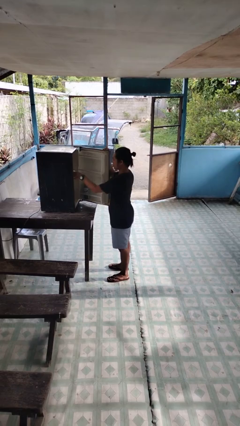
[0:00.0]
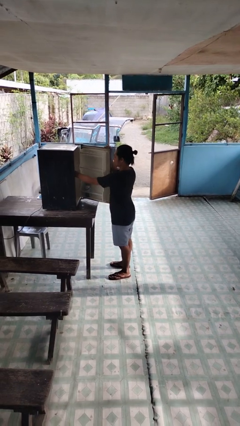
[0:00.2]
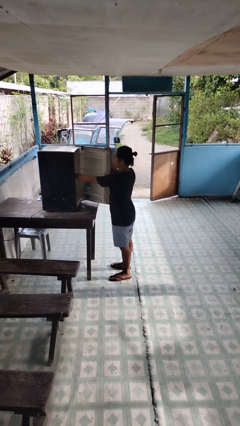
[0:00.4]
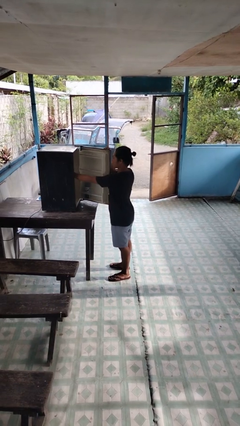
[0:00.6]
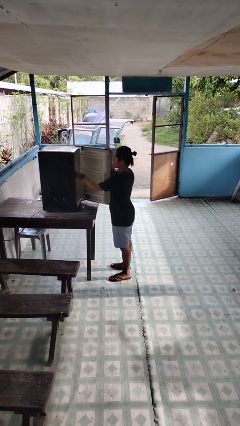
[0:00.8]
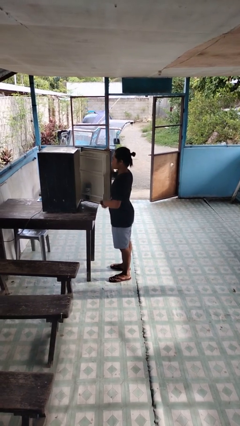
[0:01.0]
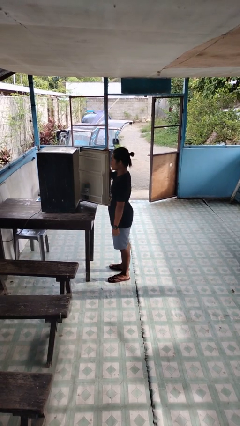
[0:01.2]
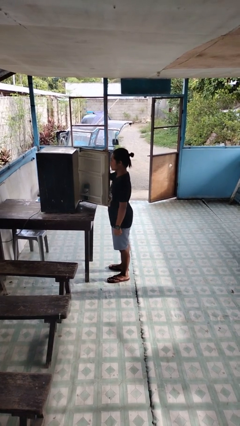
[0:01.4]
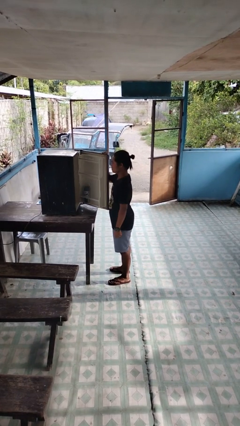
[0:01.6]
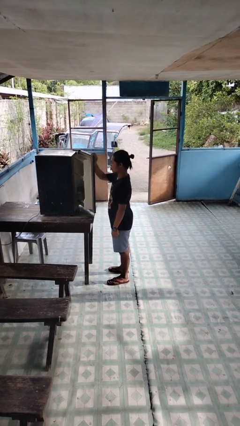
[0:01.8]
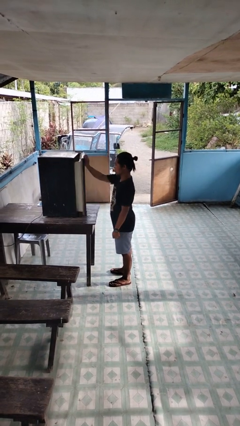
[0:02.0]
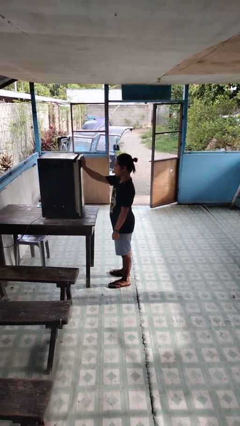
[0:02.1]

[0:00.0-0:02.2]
person puts object into refrigerator

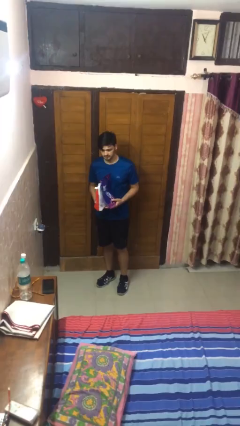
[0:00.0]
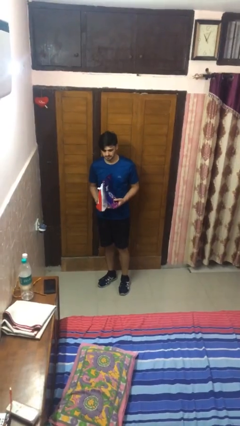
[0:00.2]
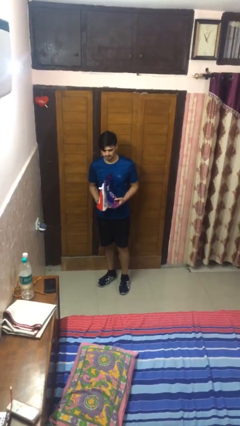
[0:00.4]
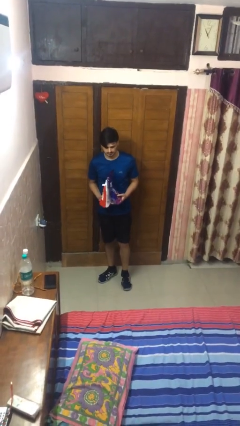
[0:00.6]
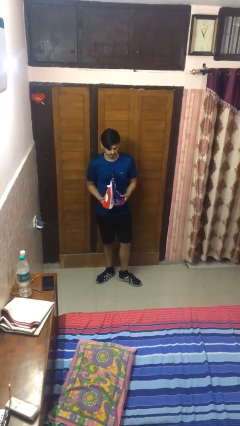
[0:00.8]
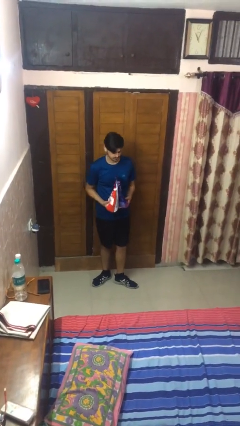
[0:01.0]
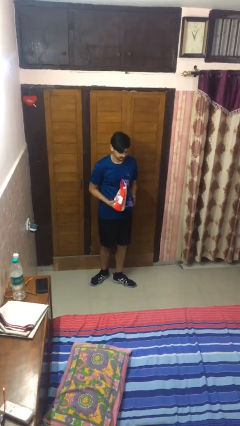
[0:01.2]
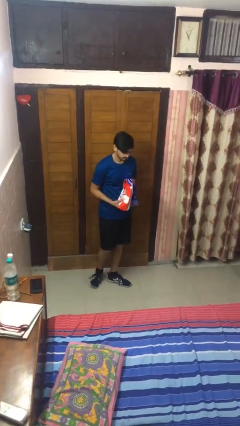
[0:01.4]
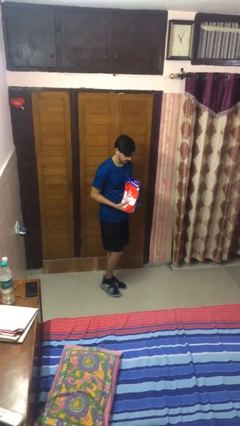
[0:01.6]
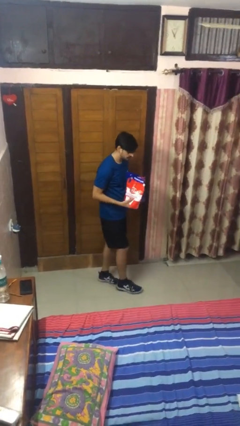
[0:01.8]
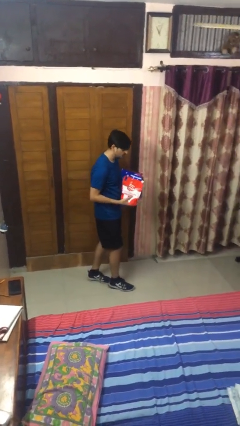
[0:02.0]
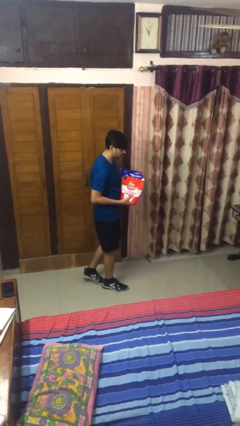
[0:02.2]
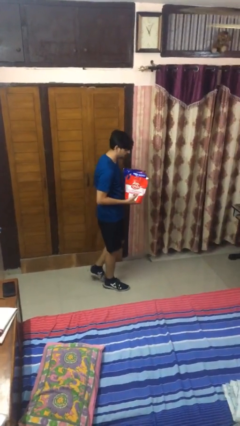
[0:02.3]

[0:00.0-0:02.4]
person carries groceries

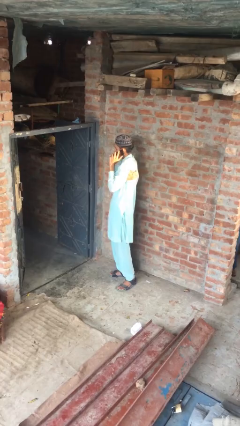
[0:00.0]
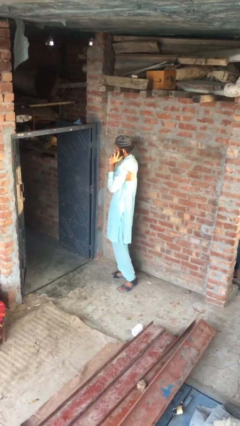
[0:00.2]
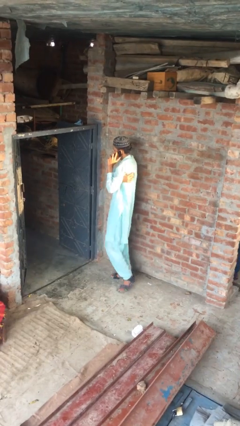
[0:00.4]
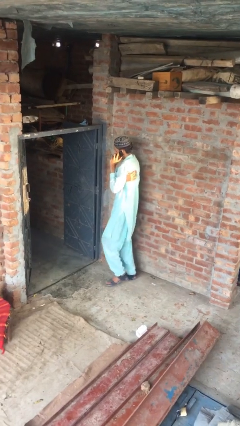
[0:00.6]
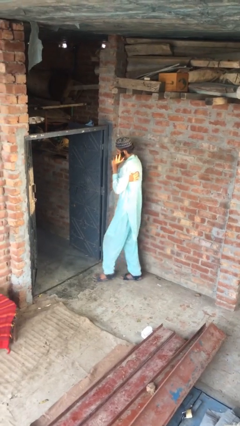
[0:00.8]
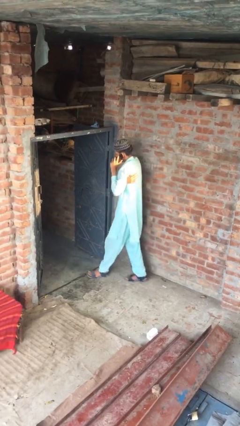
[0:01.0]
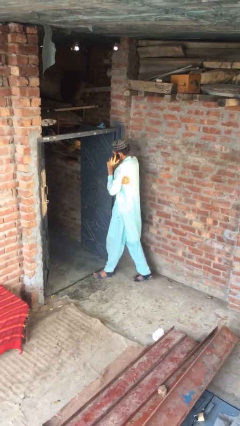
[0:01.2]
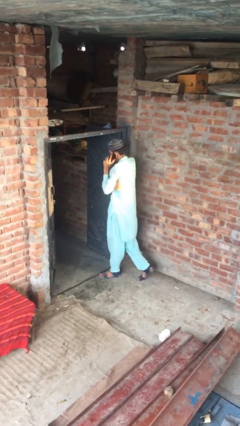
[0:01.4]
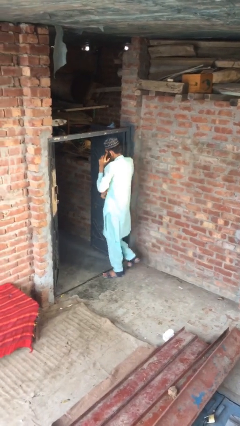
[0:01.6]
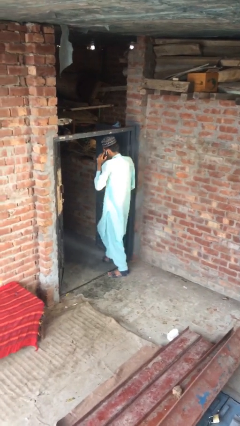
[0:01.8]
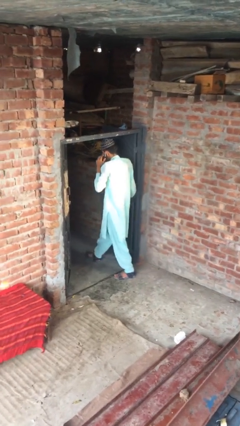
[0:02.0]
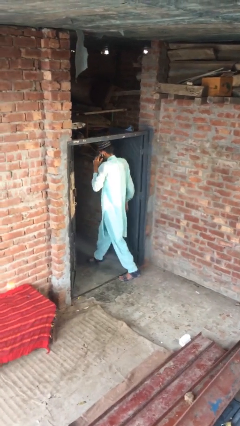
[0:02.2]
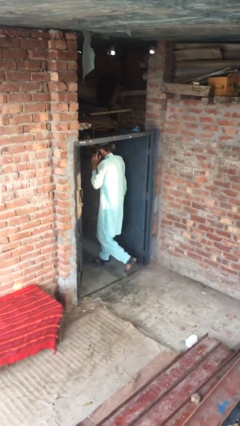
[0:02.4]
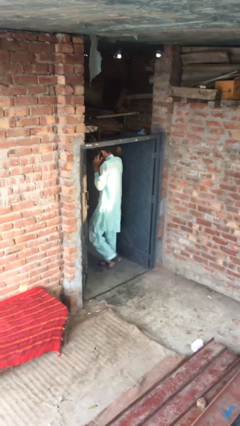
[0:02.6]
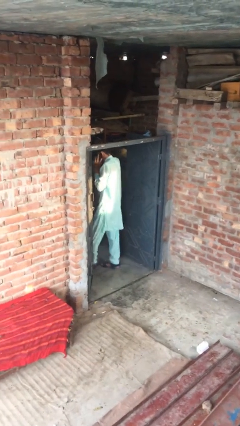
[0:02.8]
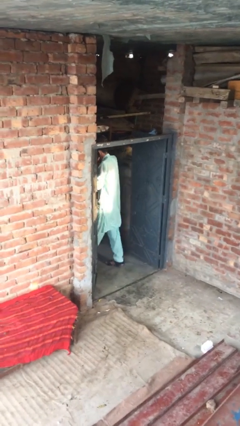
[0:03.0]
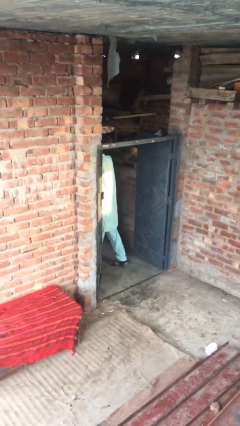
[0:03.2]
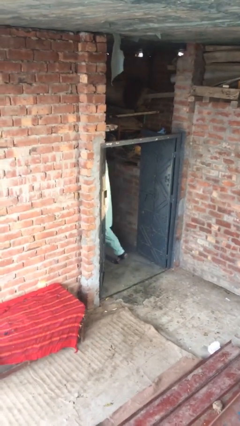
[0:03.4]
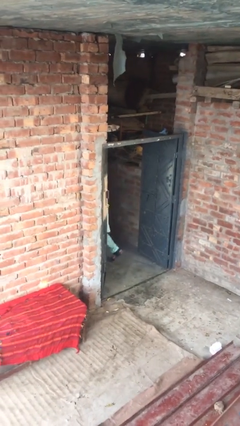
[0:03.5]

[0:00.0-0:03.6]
person exits scene through structure

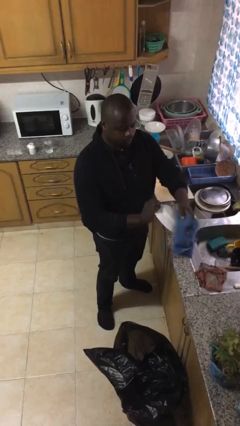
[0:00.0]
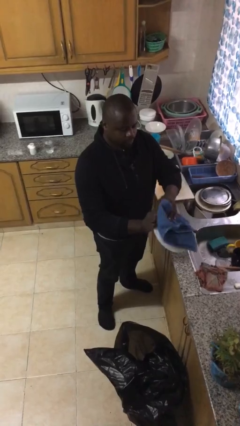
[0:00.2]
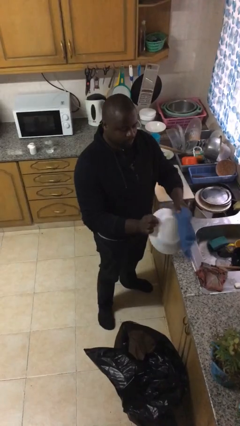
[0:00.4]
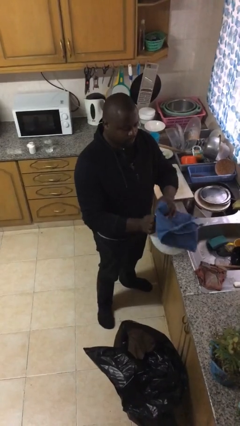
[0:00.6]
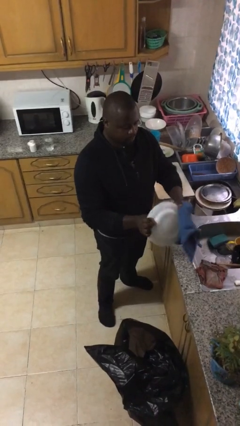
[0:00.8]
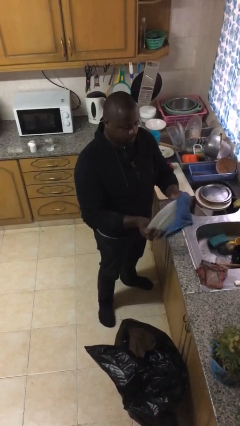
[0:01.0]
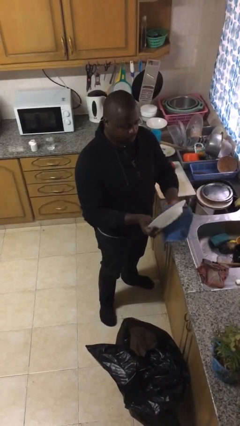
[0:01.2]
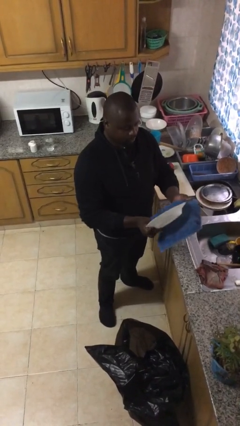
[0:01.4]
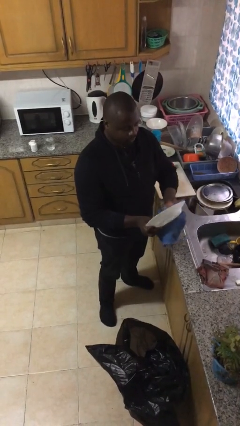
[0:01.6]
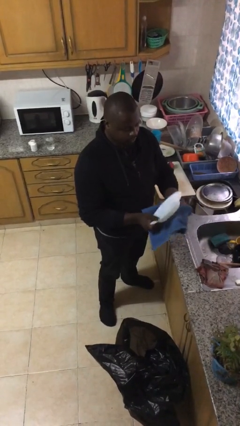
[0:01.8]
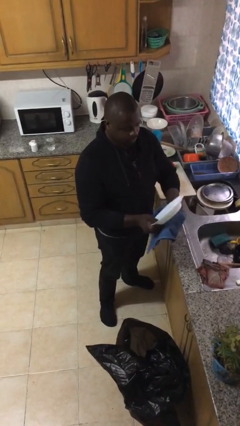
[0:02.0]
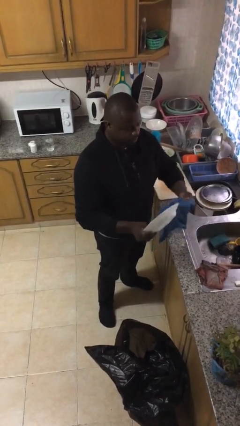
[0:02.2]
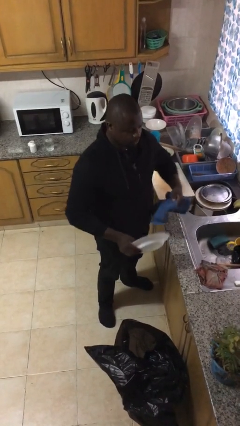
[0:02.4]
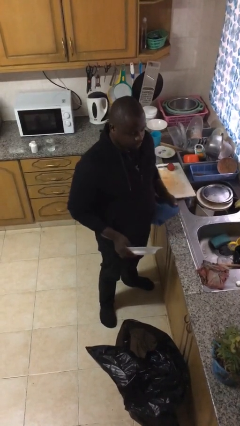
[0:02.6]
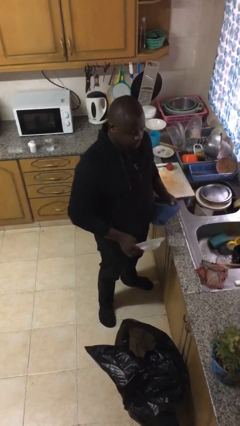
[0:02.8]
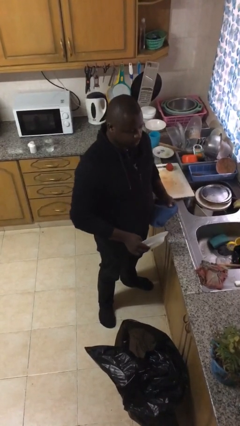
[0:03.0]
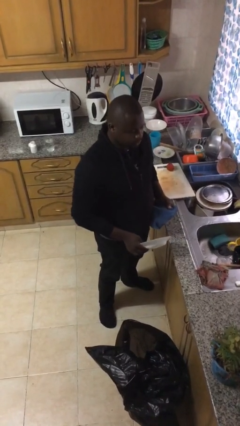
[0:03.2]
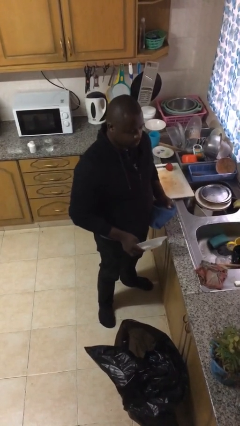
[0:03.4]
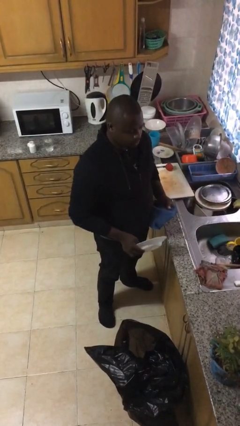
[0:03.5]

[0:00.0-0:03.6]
person dries dish

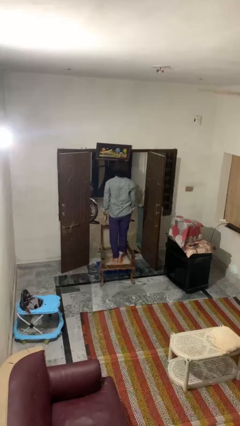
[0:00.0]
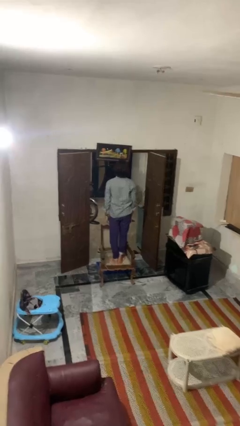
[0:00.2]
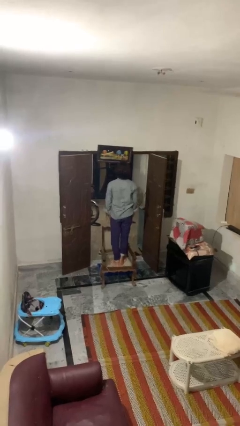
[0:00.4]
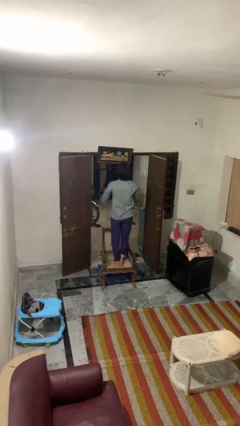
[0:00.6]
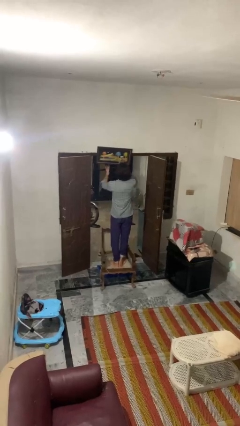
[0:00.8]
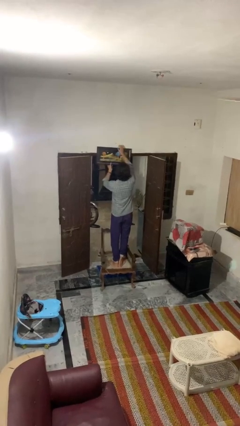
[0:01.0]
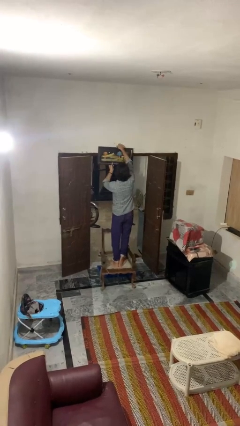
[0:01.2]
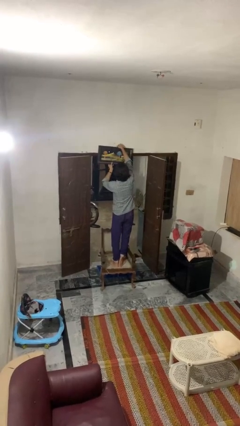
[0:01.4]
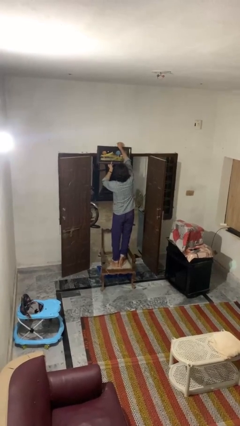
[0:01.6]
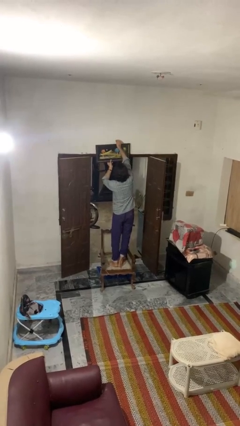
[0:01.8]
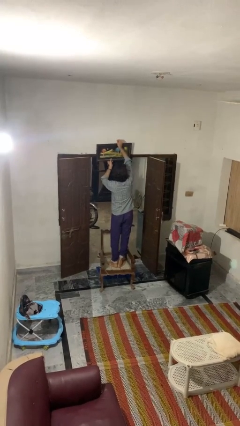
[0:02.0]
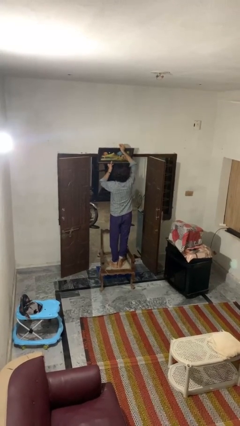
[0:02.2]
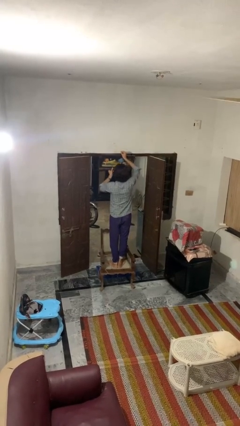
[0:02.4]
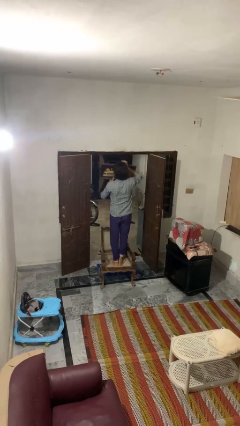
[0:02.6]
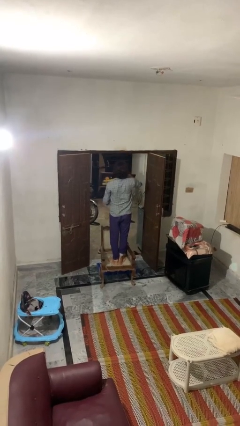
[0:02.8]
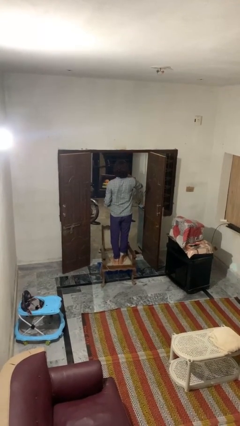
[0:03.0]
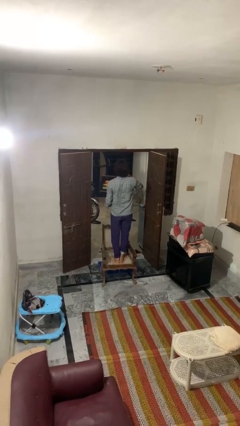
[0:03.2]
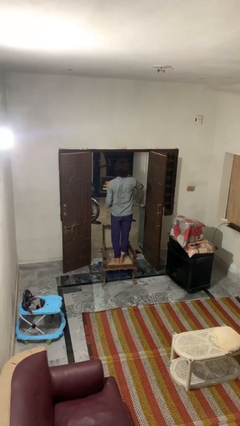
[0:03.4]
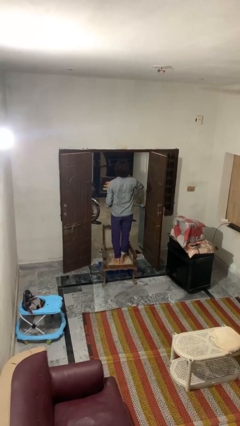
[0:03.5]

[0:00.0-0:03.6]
person takes down picture frame

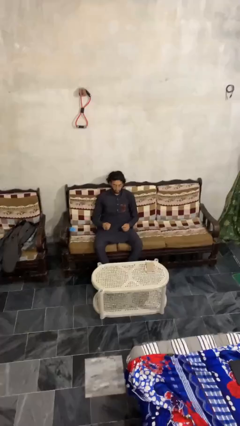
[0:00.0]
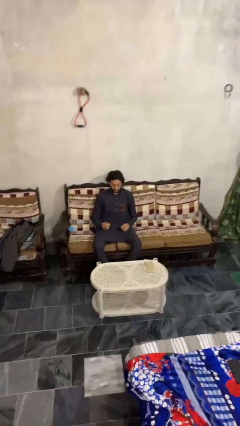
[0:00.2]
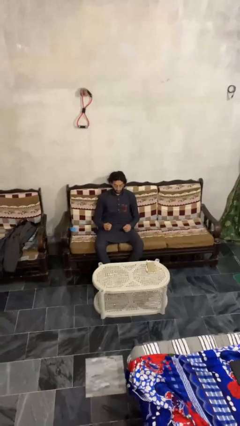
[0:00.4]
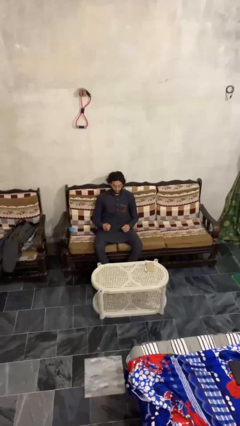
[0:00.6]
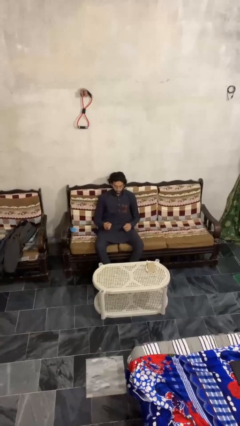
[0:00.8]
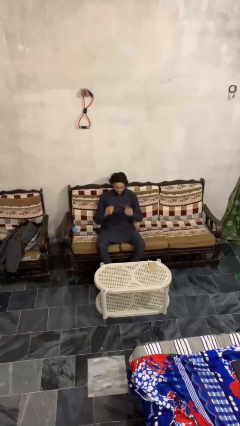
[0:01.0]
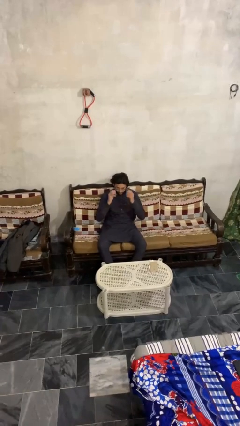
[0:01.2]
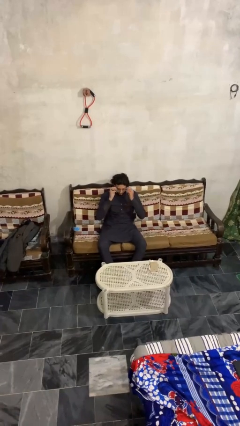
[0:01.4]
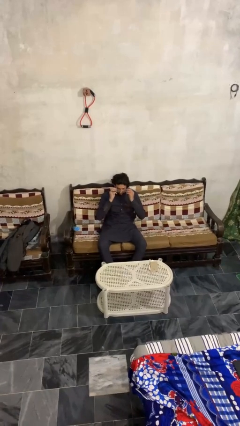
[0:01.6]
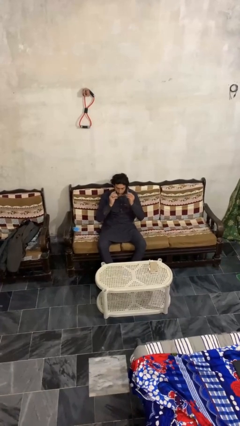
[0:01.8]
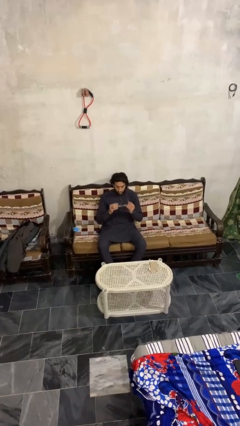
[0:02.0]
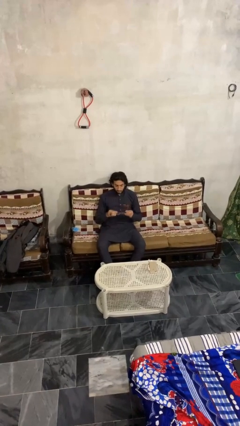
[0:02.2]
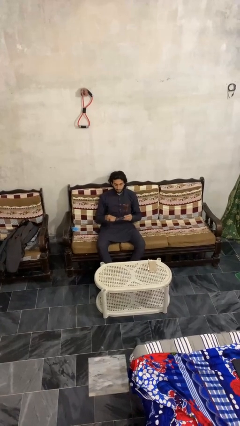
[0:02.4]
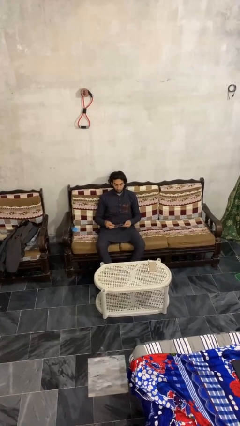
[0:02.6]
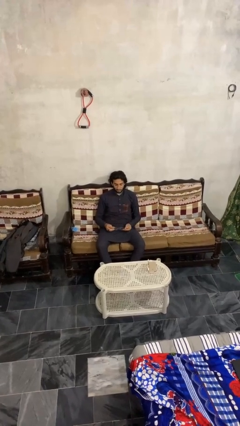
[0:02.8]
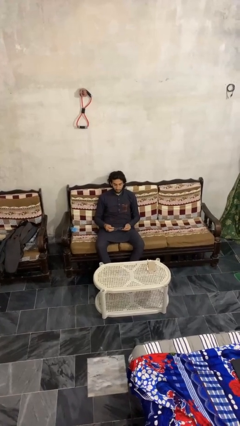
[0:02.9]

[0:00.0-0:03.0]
person takes off glasses
